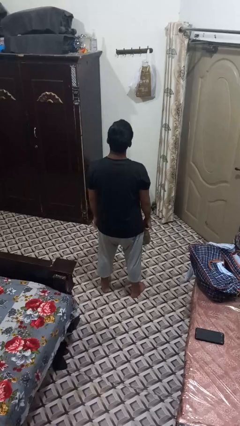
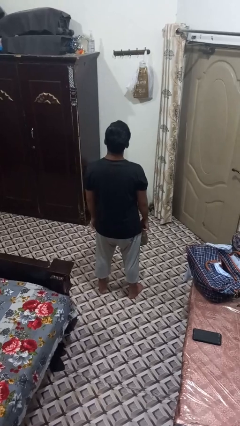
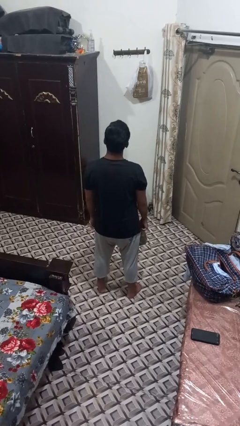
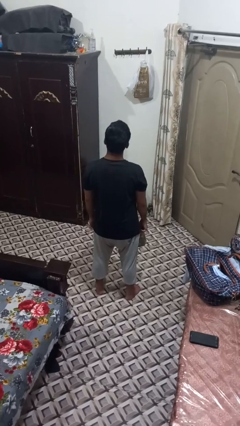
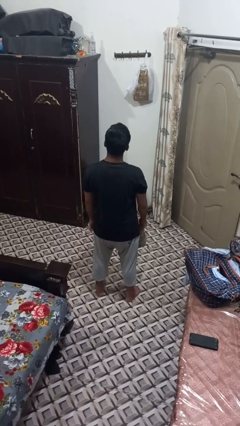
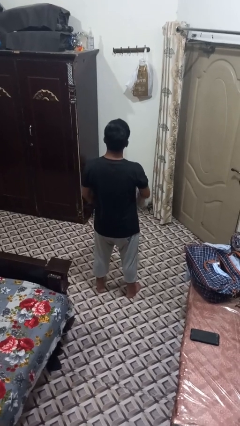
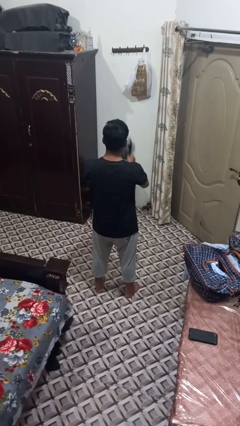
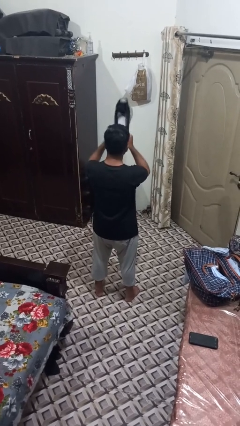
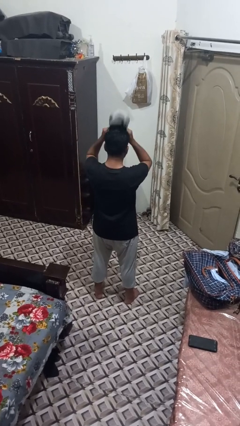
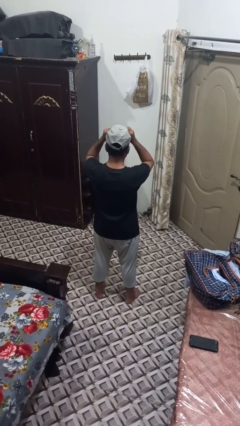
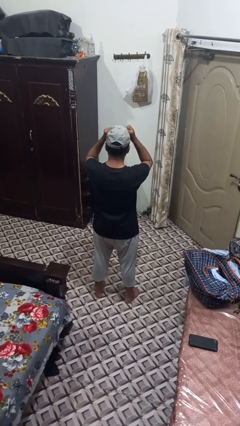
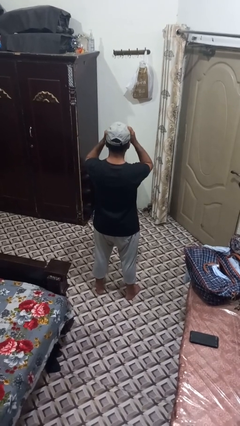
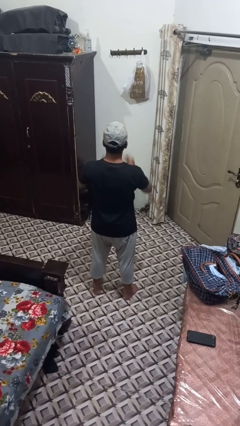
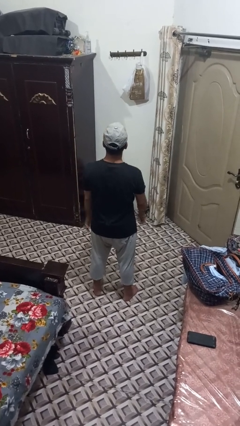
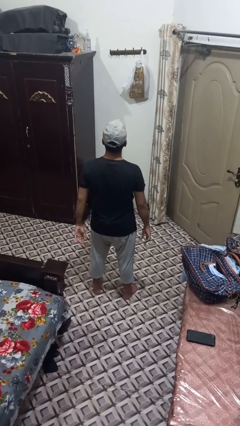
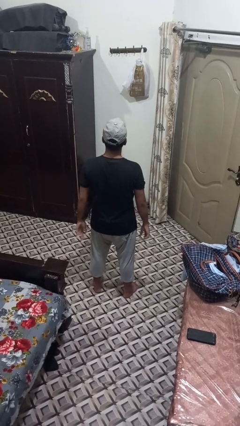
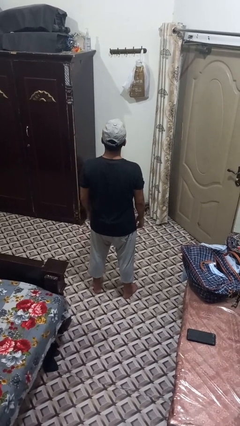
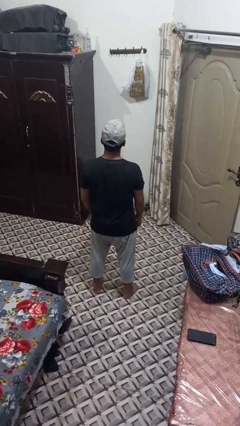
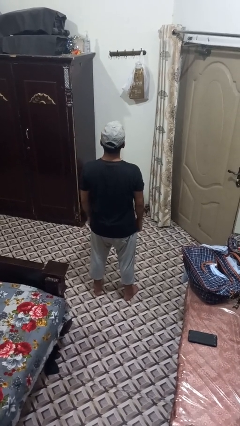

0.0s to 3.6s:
person puts on hat

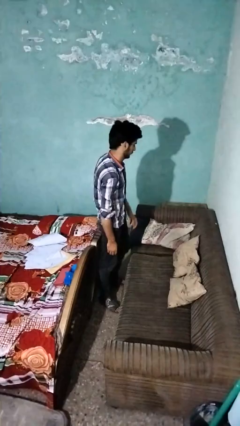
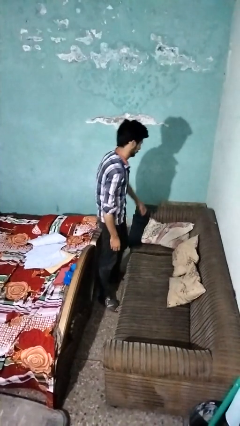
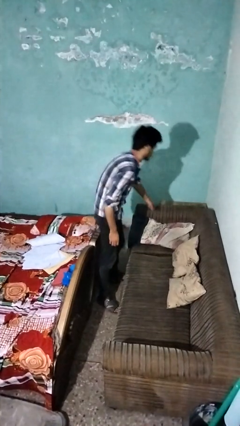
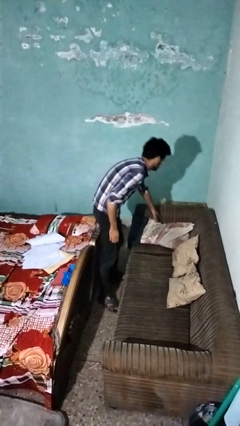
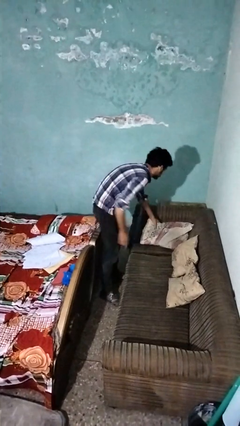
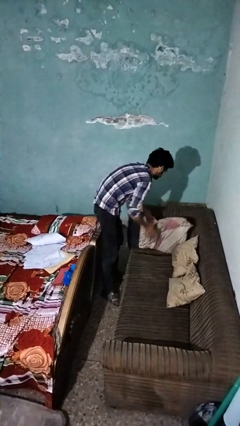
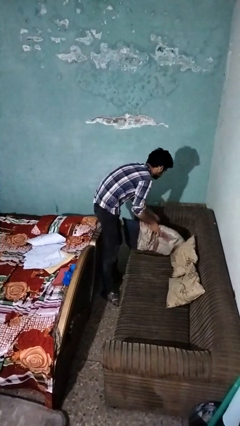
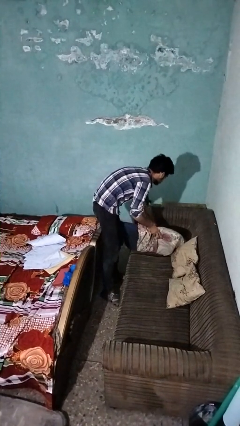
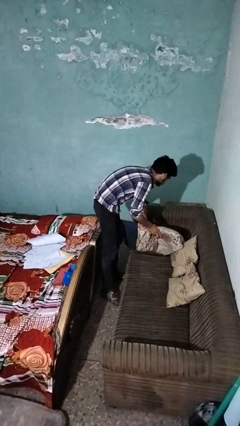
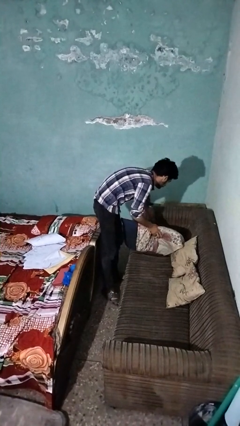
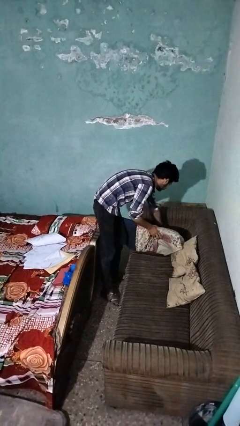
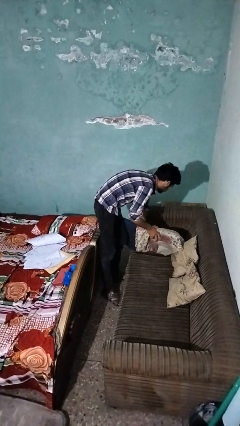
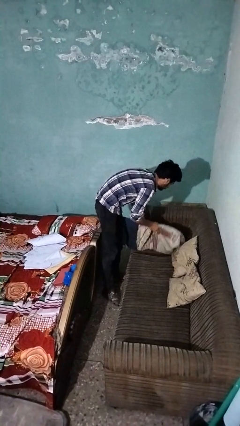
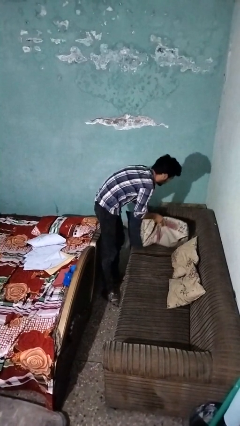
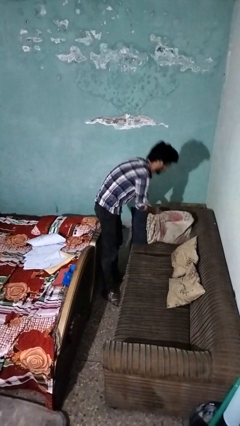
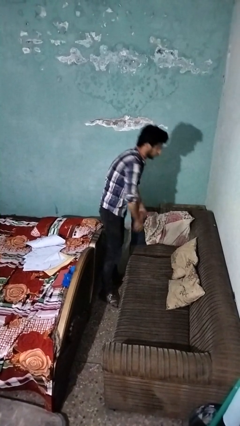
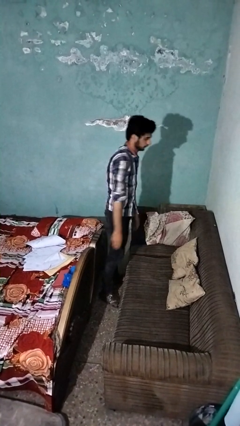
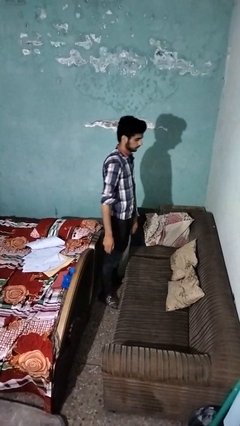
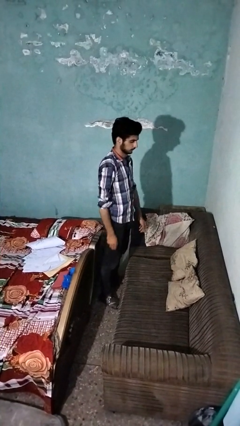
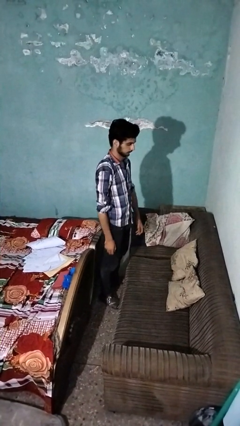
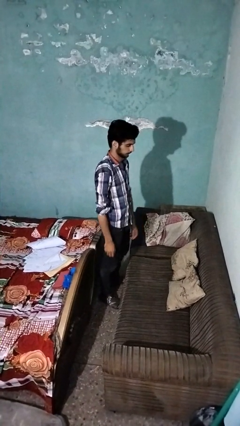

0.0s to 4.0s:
person searches in couch

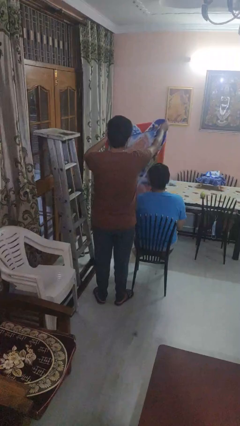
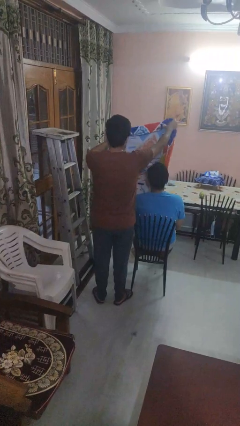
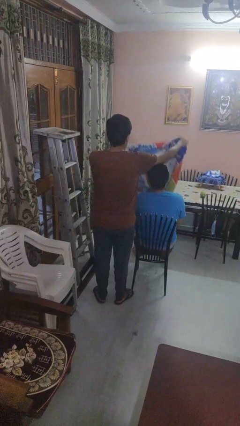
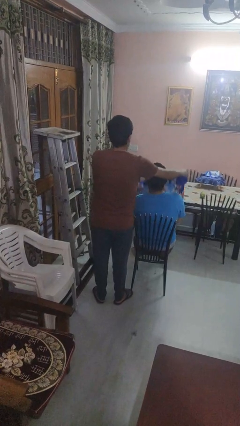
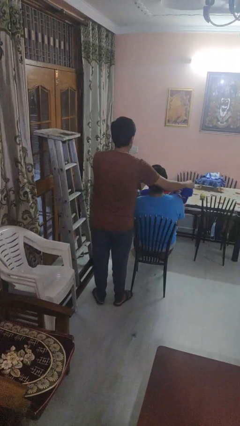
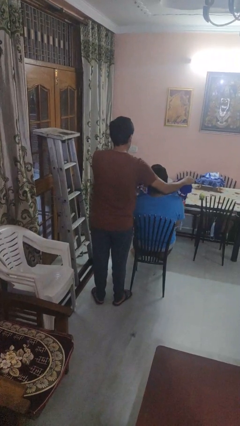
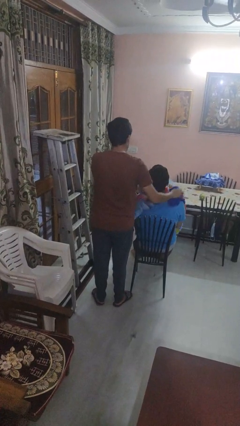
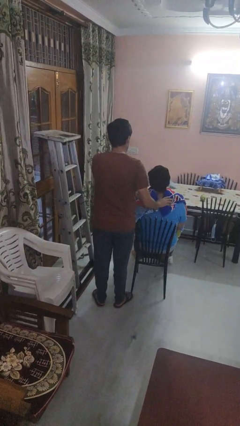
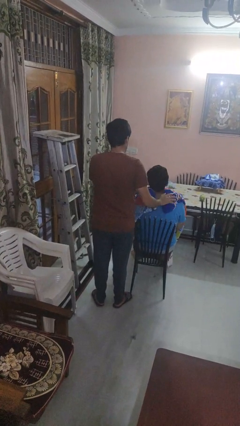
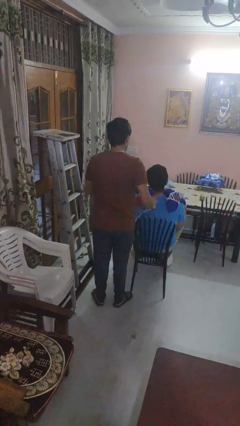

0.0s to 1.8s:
person covers friend with blanket

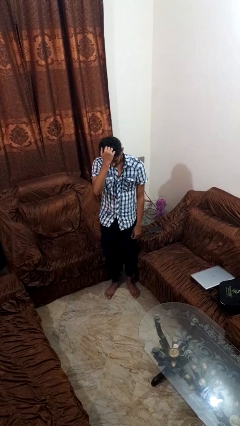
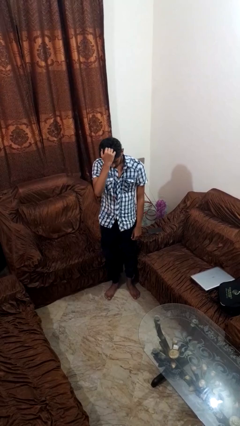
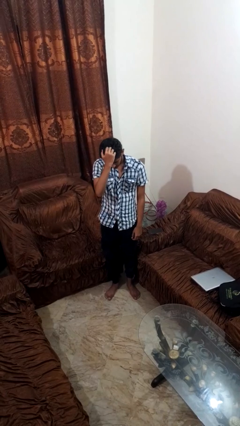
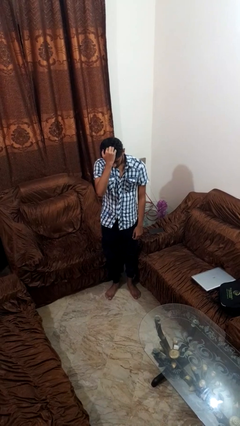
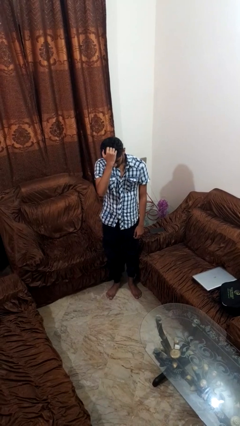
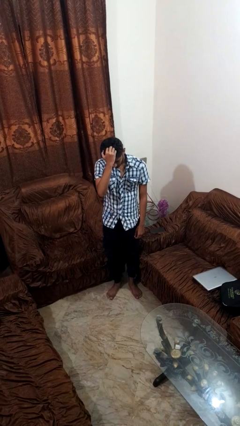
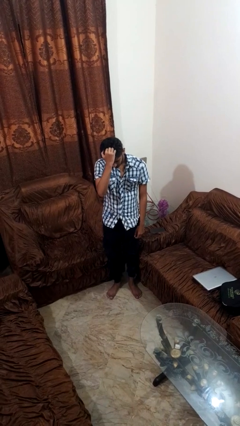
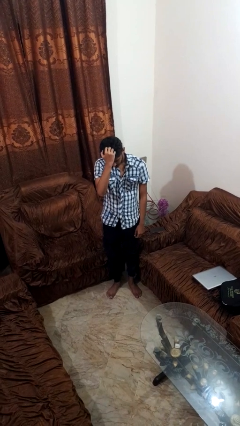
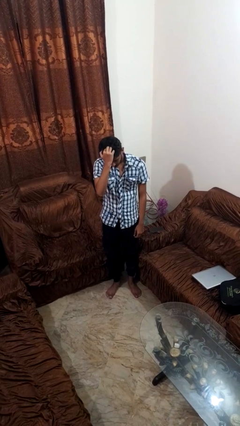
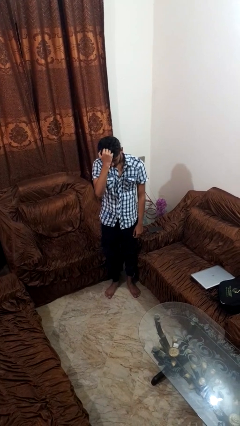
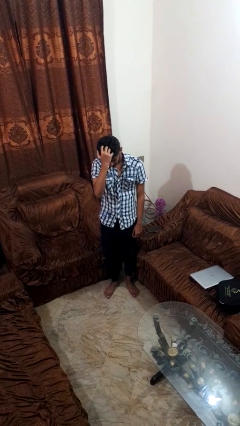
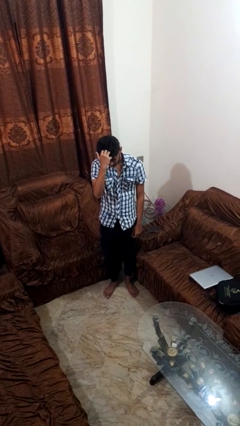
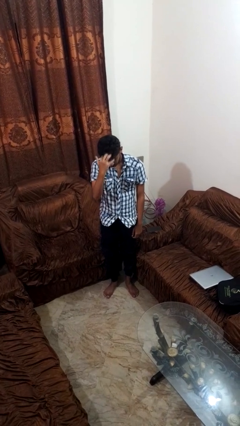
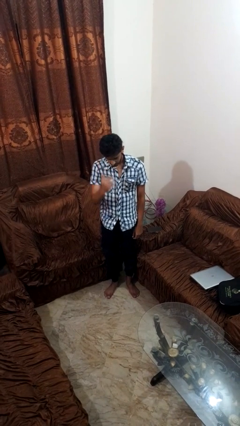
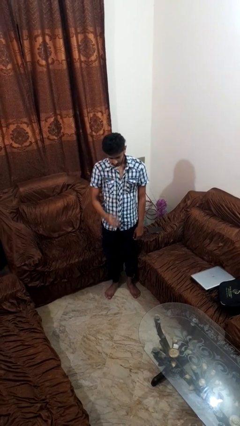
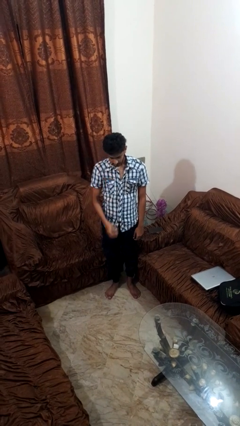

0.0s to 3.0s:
person scratches face

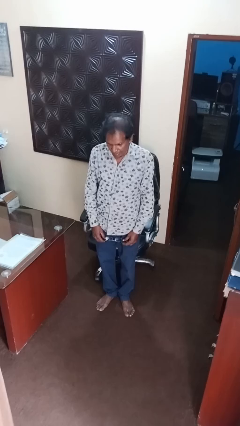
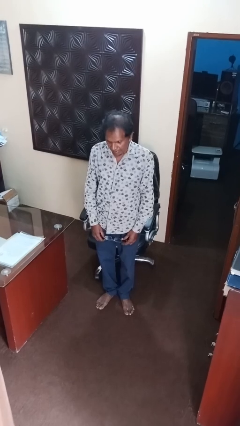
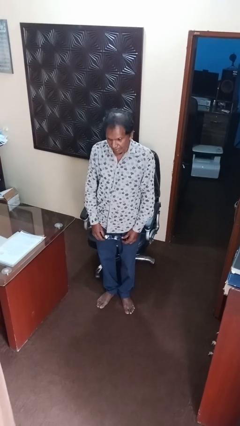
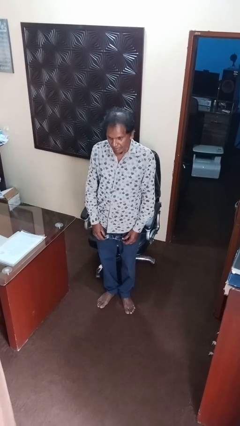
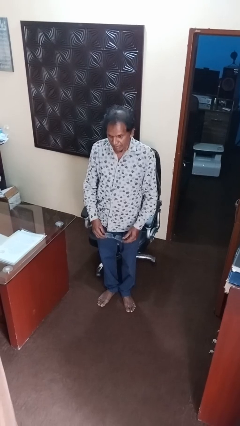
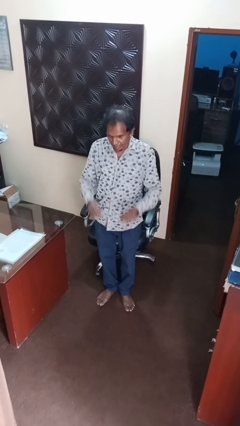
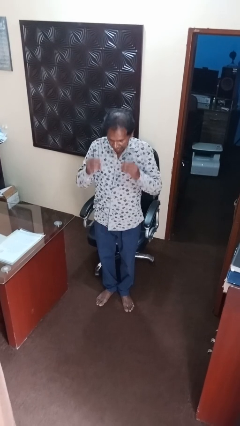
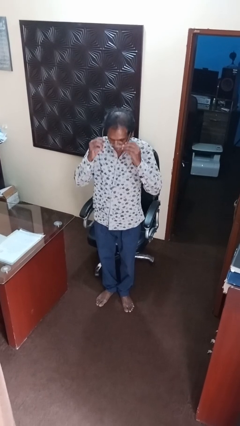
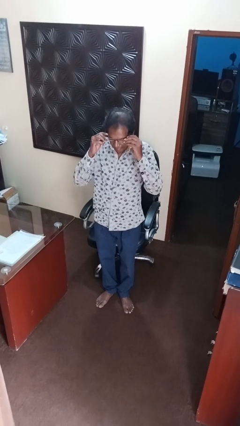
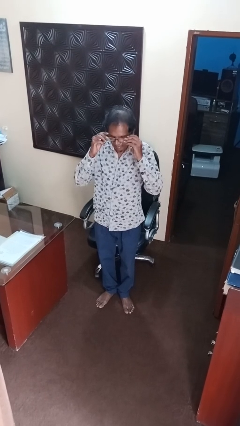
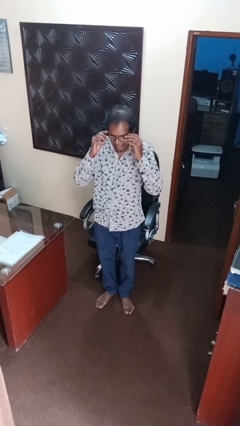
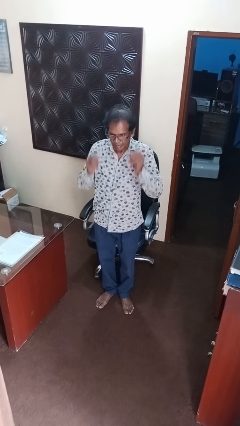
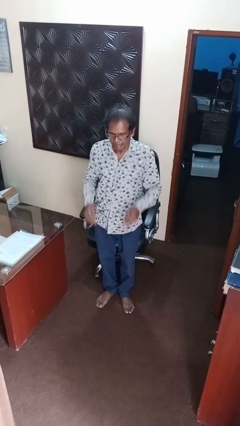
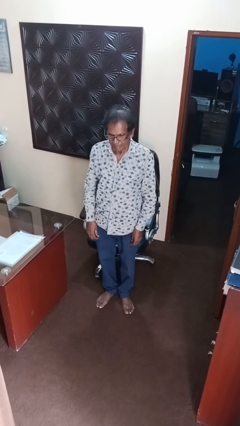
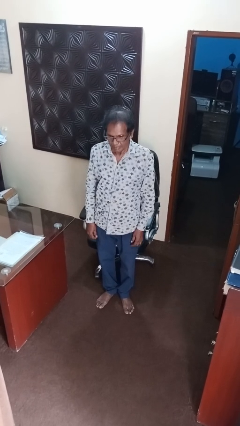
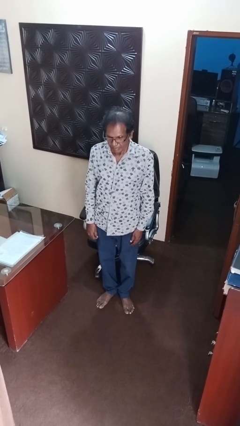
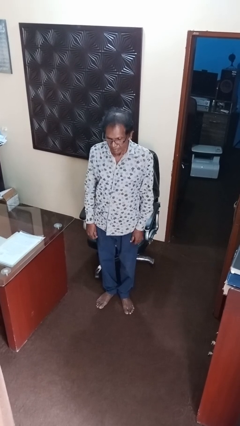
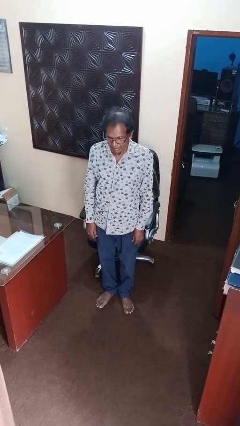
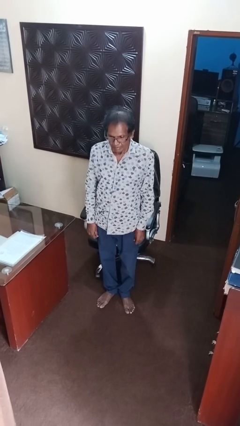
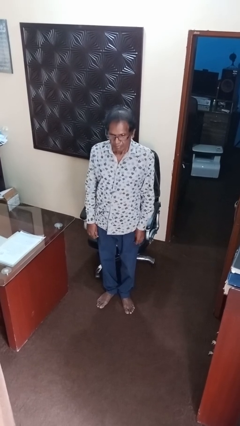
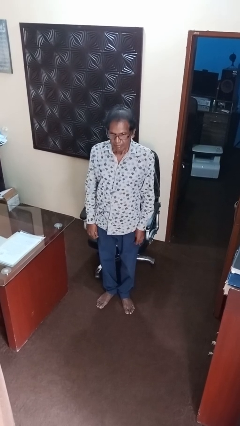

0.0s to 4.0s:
person puts on glasses

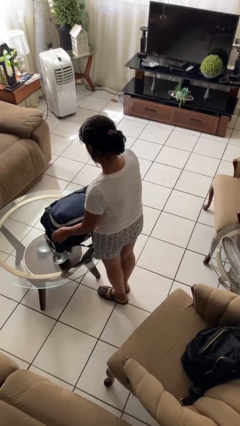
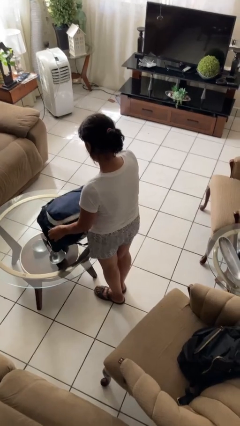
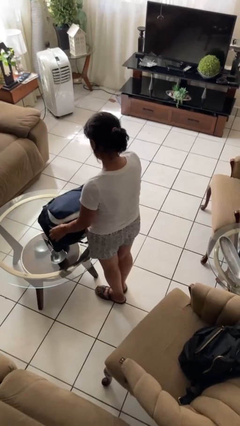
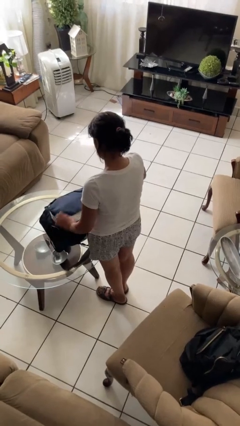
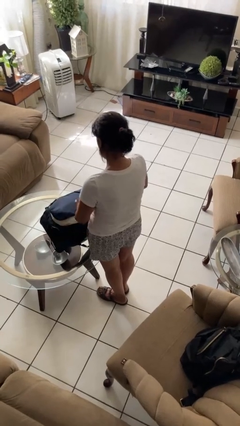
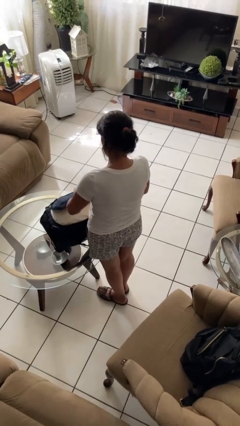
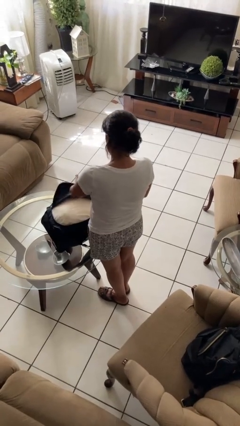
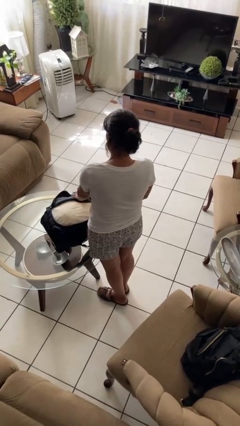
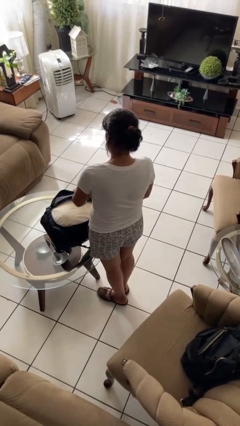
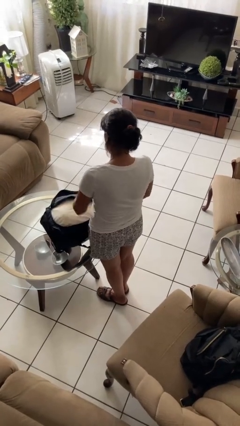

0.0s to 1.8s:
person opens suitcase
